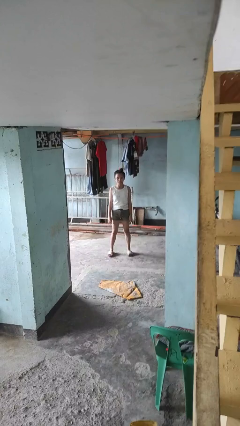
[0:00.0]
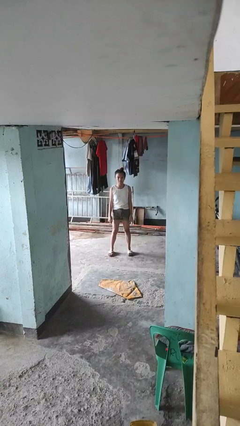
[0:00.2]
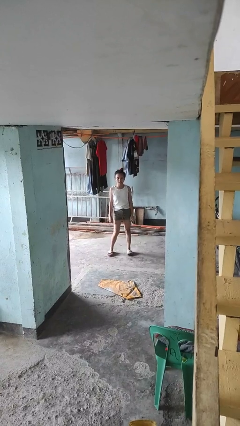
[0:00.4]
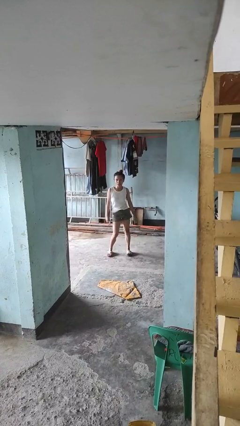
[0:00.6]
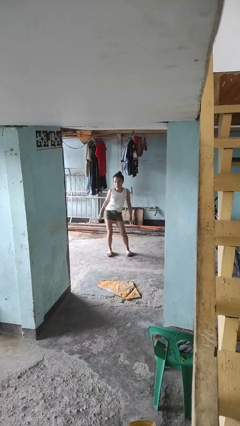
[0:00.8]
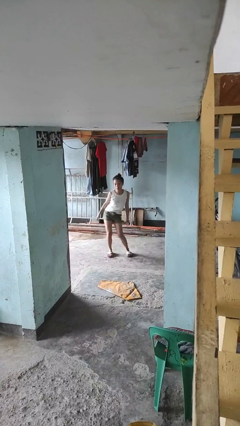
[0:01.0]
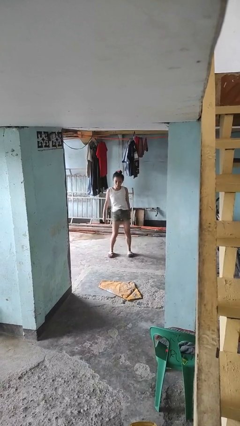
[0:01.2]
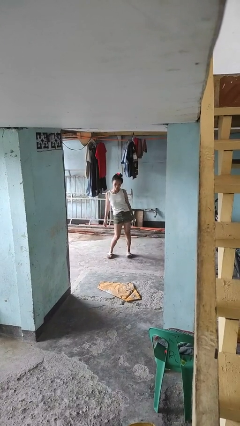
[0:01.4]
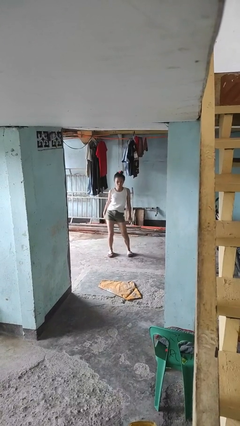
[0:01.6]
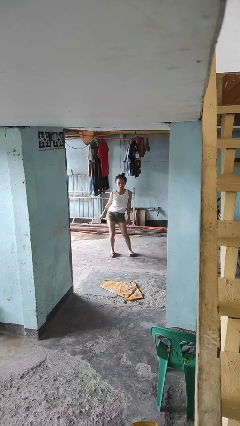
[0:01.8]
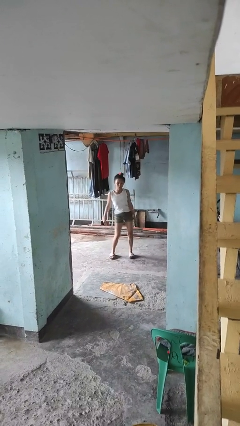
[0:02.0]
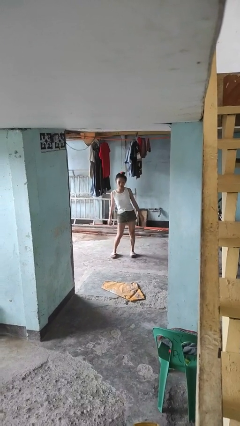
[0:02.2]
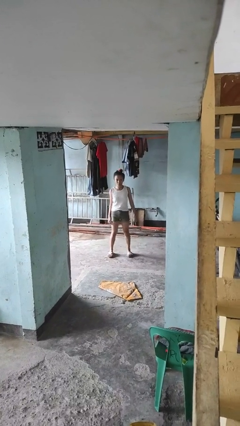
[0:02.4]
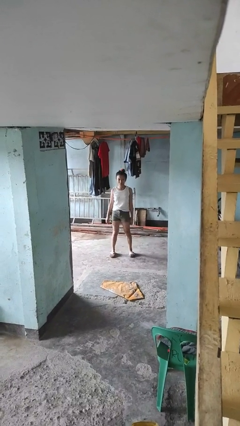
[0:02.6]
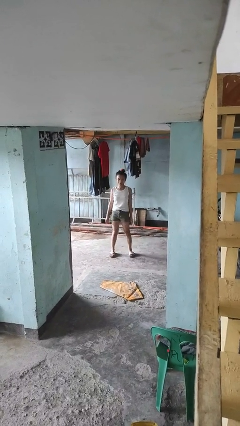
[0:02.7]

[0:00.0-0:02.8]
person wiggles hips

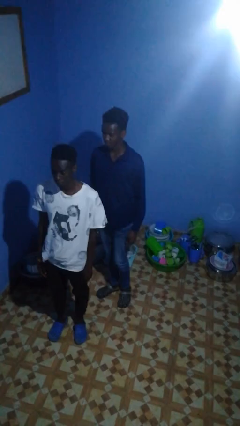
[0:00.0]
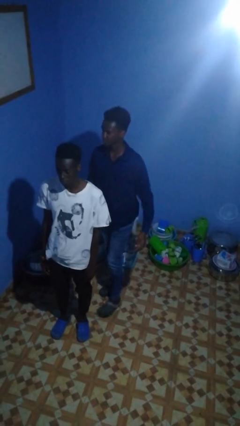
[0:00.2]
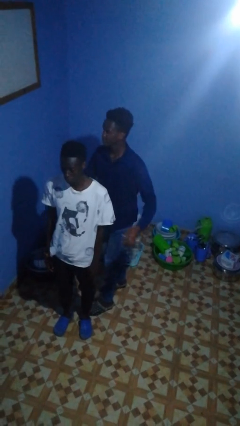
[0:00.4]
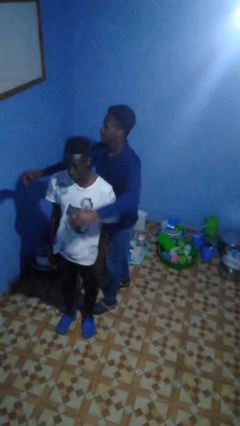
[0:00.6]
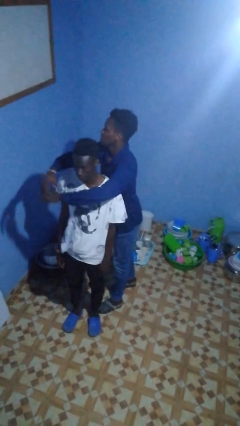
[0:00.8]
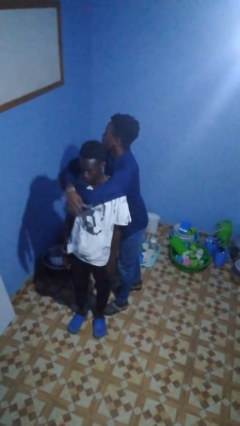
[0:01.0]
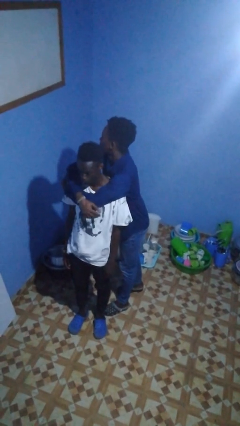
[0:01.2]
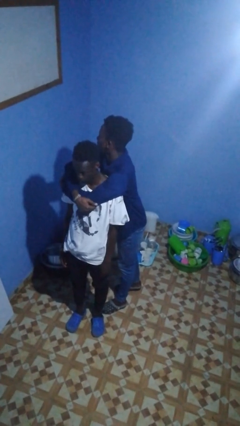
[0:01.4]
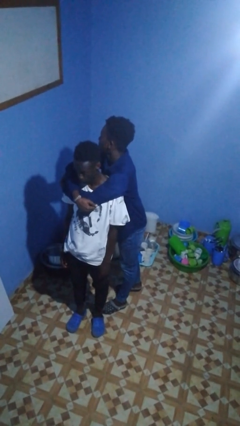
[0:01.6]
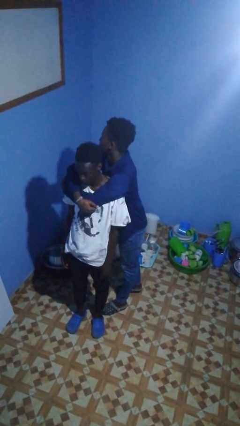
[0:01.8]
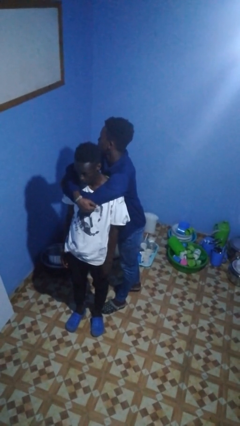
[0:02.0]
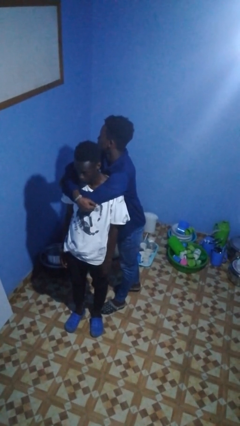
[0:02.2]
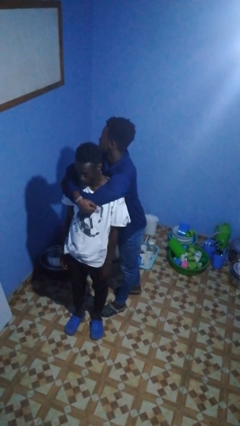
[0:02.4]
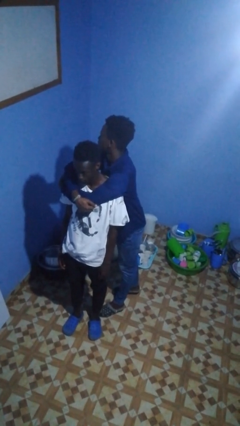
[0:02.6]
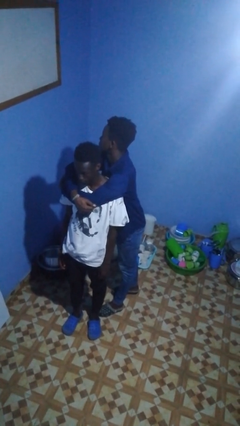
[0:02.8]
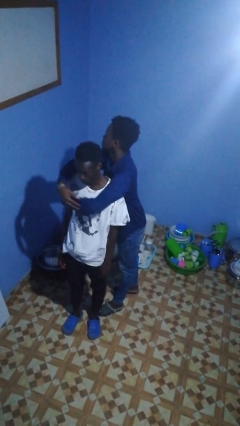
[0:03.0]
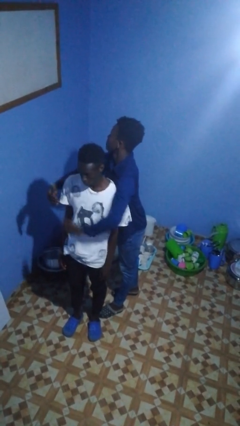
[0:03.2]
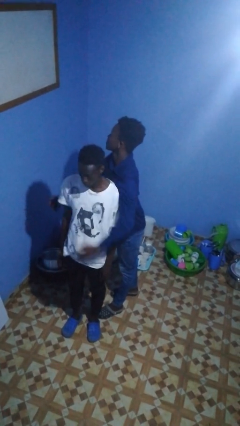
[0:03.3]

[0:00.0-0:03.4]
person hugs person from behind

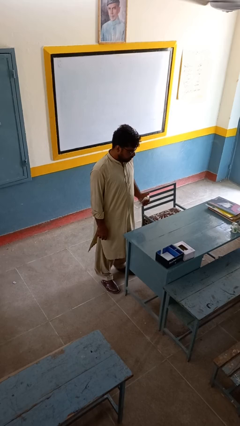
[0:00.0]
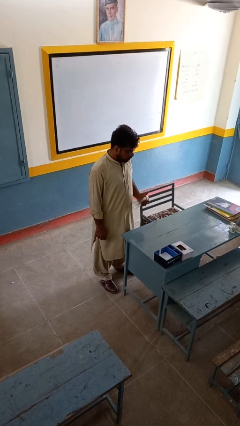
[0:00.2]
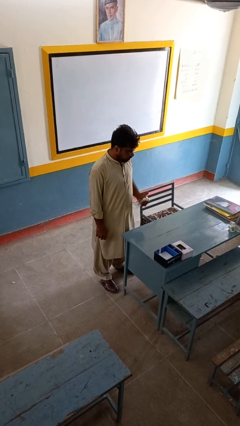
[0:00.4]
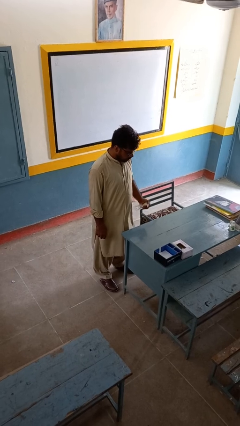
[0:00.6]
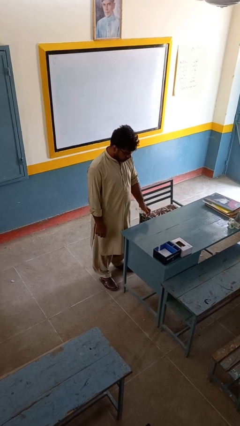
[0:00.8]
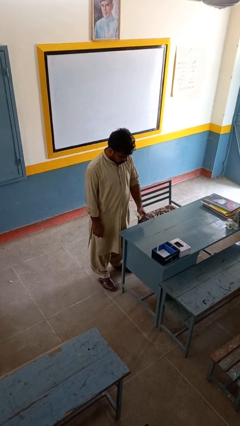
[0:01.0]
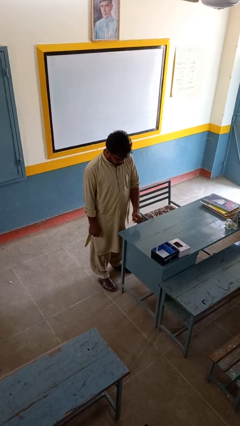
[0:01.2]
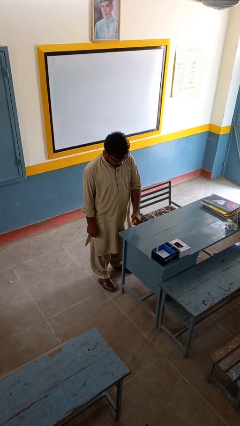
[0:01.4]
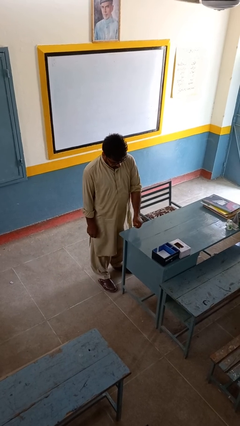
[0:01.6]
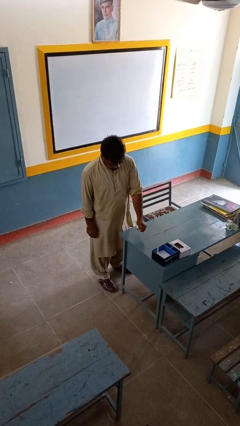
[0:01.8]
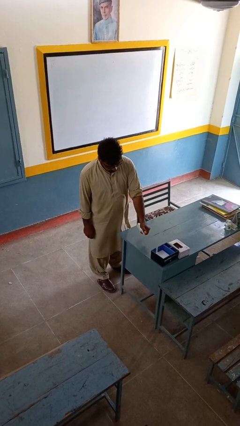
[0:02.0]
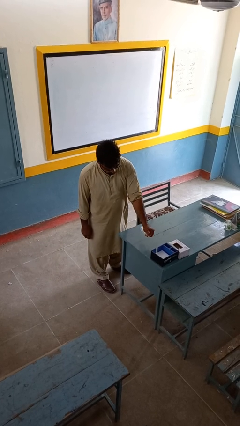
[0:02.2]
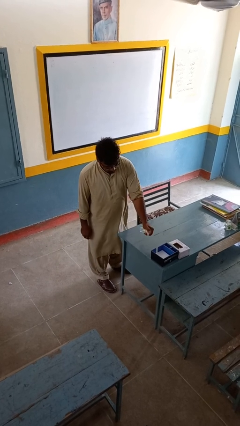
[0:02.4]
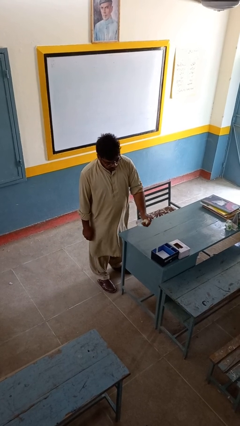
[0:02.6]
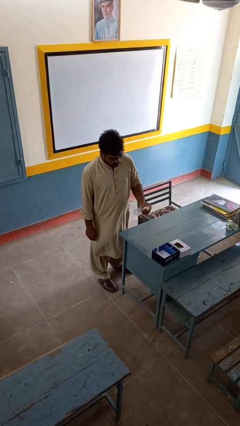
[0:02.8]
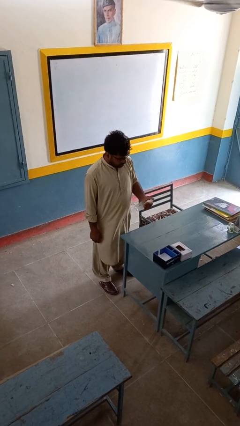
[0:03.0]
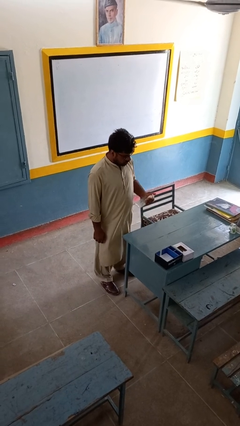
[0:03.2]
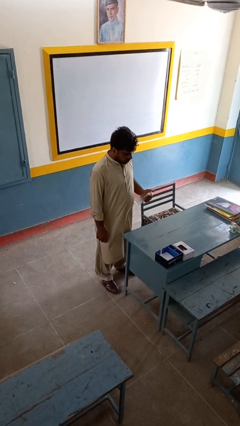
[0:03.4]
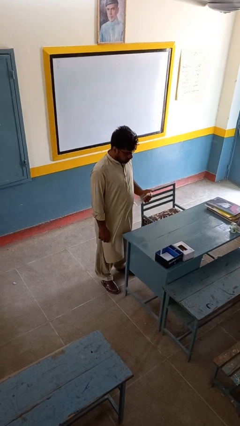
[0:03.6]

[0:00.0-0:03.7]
person sprays from bottle

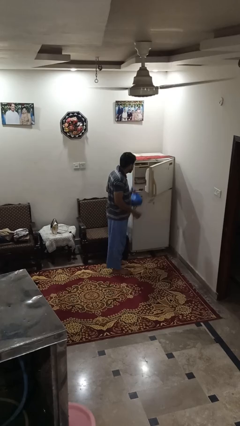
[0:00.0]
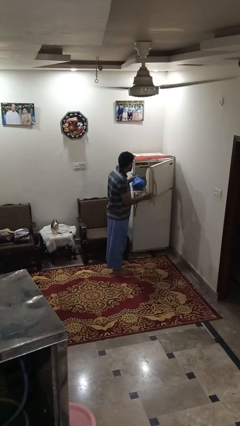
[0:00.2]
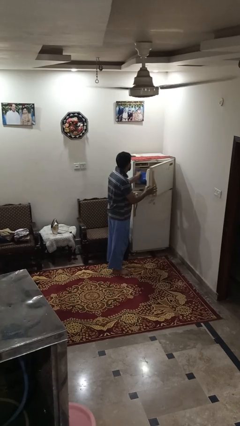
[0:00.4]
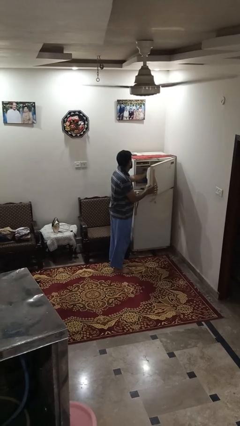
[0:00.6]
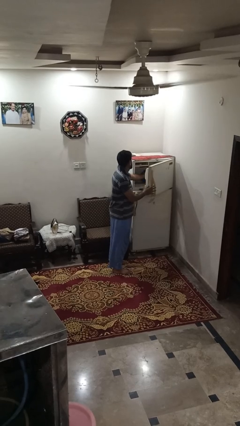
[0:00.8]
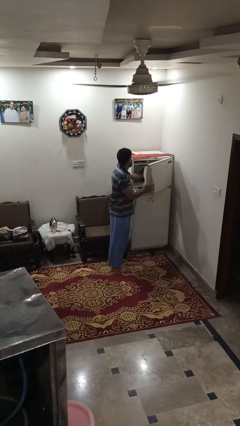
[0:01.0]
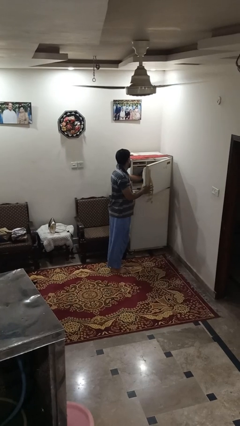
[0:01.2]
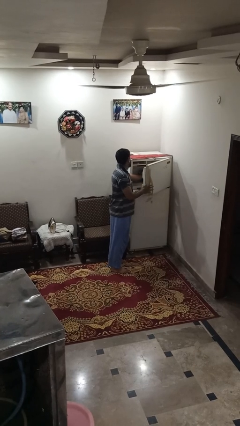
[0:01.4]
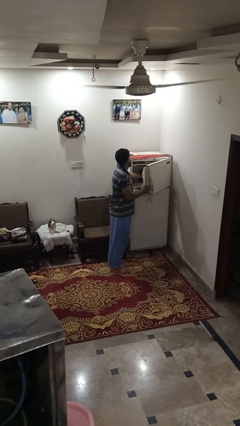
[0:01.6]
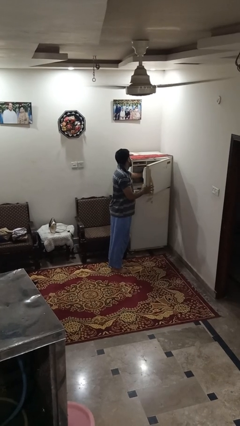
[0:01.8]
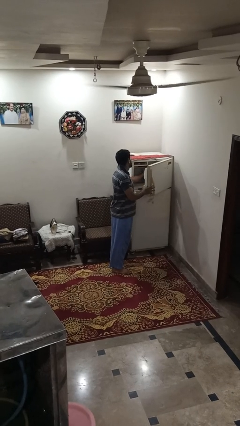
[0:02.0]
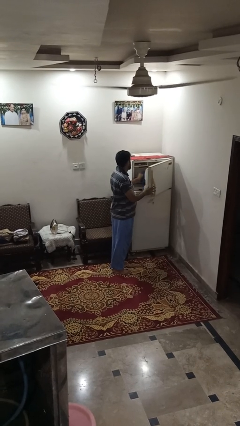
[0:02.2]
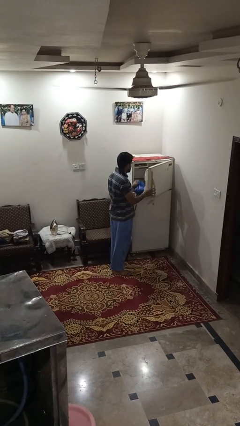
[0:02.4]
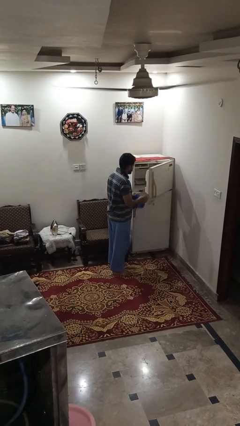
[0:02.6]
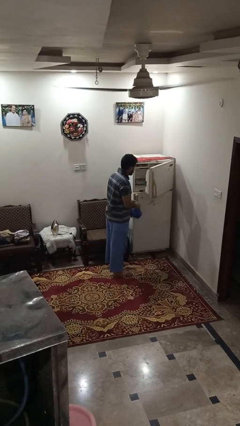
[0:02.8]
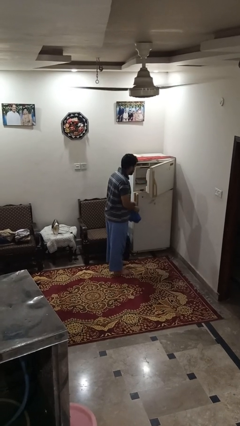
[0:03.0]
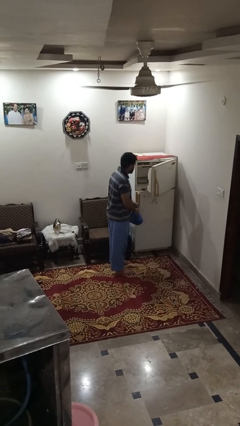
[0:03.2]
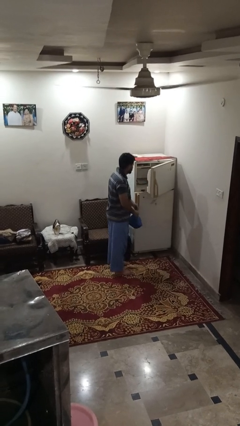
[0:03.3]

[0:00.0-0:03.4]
person loads groceries into refrigerator

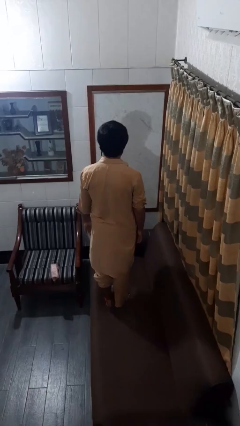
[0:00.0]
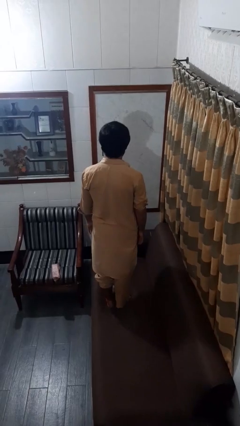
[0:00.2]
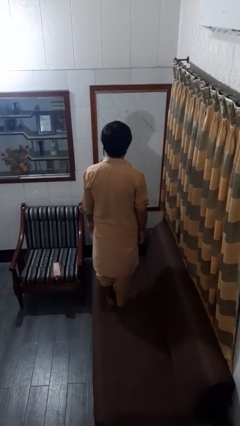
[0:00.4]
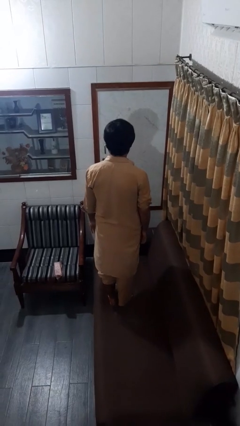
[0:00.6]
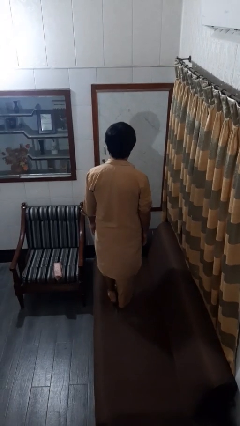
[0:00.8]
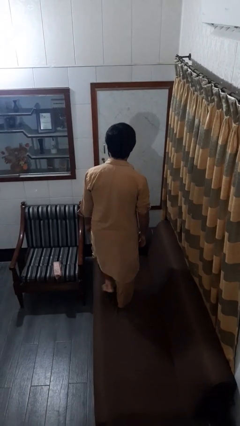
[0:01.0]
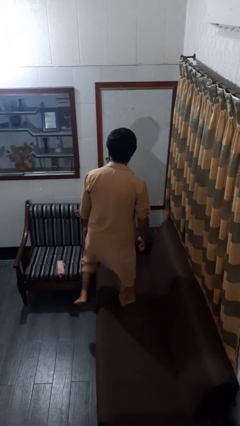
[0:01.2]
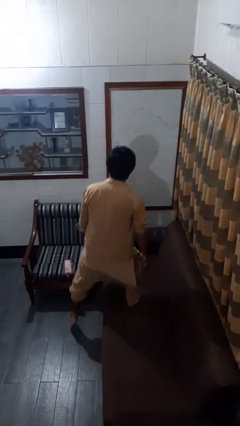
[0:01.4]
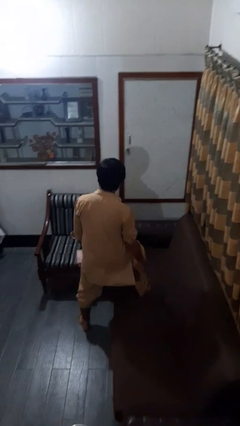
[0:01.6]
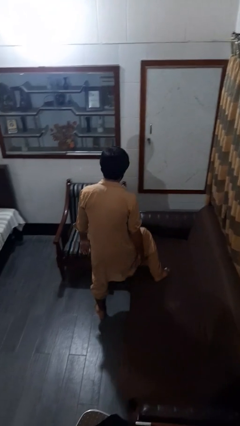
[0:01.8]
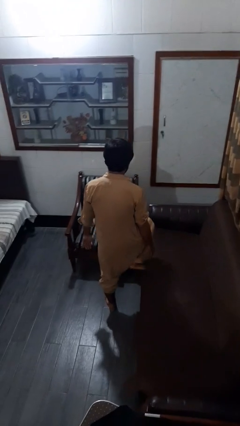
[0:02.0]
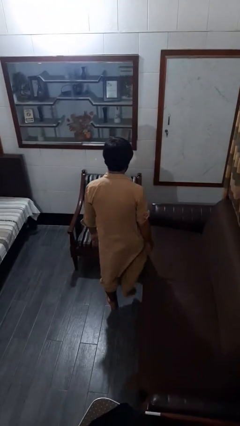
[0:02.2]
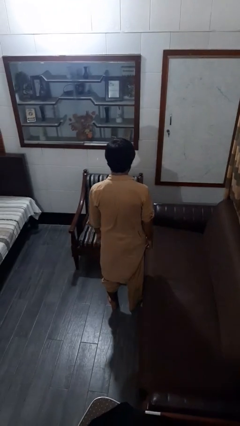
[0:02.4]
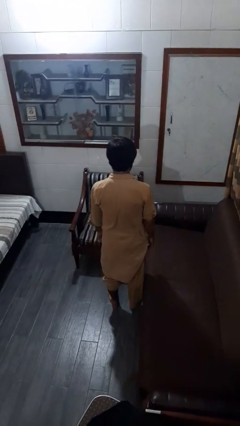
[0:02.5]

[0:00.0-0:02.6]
person climbs off couch

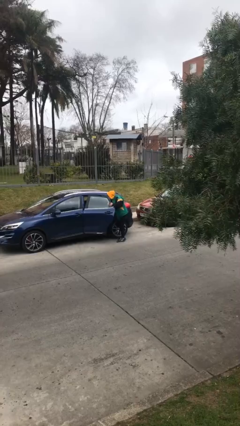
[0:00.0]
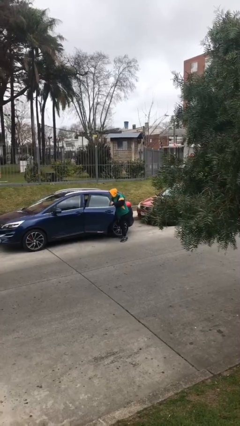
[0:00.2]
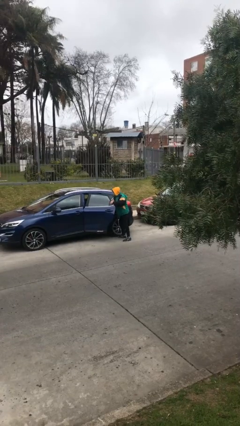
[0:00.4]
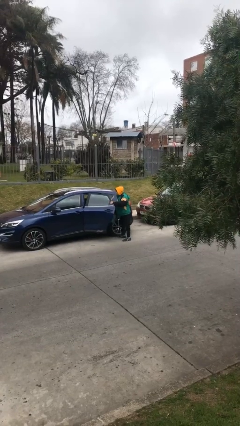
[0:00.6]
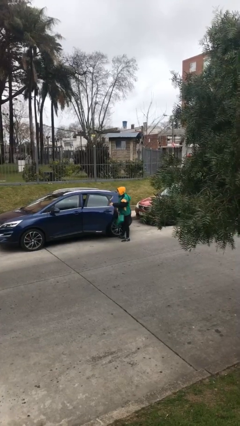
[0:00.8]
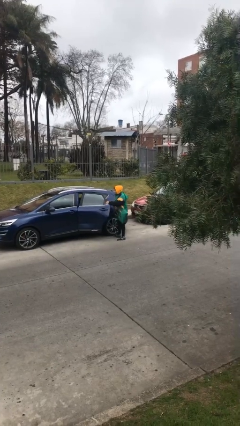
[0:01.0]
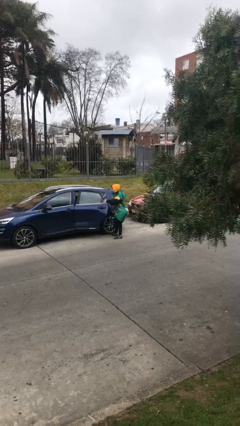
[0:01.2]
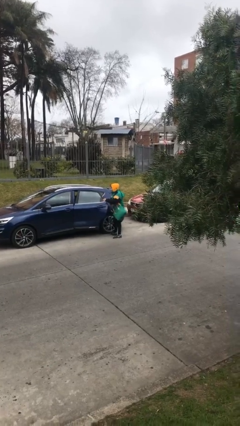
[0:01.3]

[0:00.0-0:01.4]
person unloads car

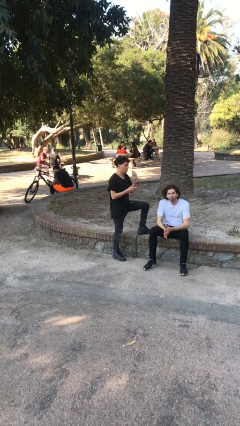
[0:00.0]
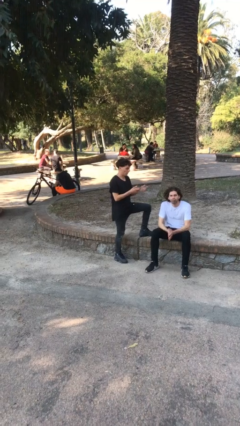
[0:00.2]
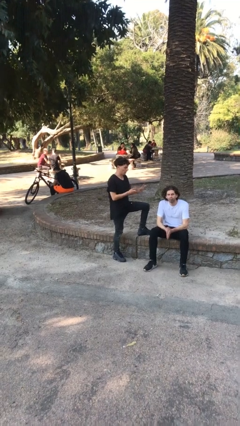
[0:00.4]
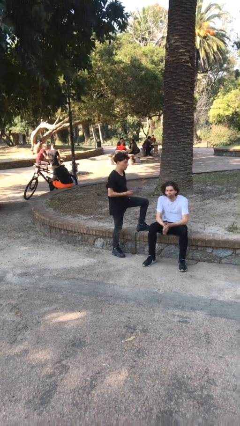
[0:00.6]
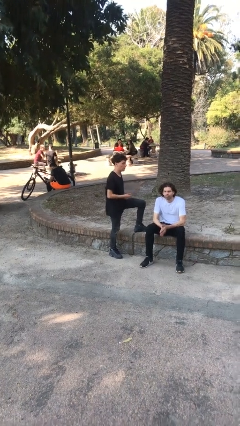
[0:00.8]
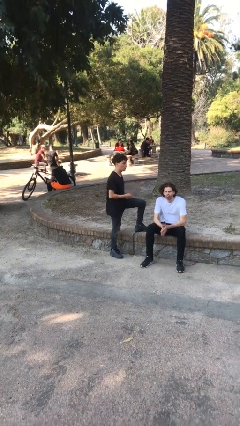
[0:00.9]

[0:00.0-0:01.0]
person grabs person by hair
